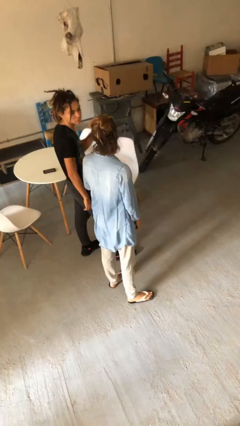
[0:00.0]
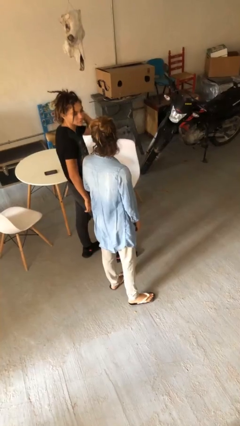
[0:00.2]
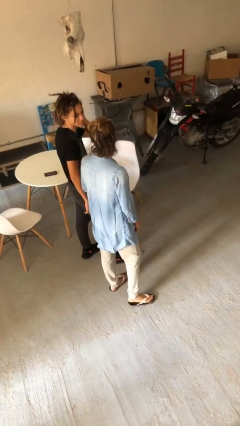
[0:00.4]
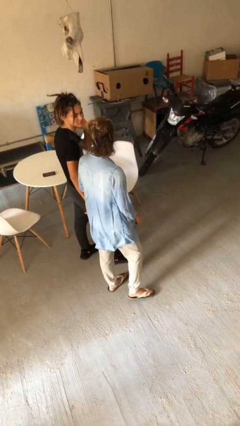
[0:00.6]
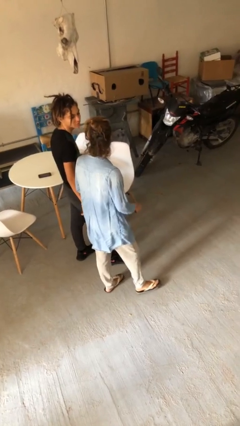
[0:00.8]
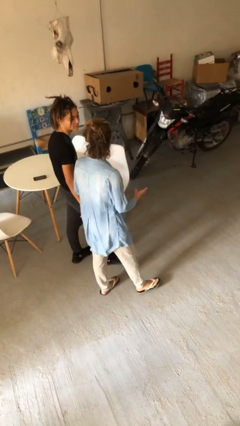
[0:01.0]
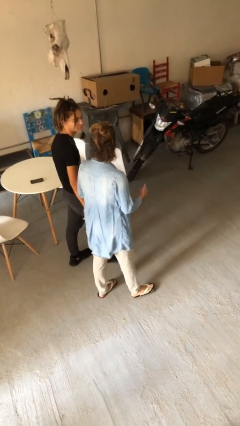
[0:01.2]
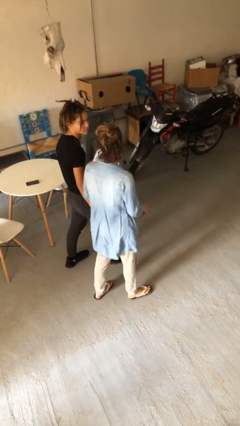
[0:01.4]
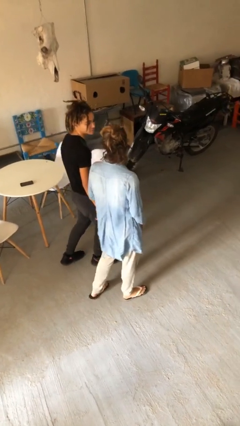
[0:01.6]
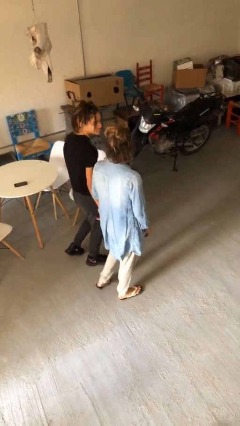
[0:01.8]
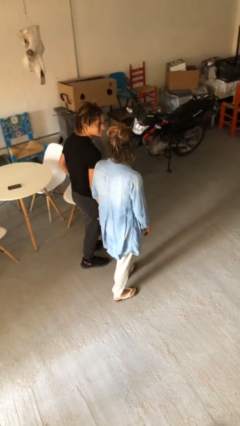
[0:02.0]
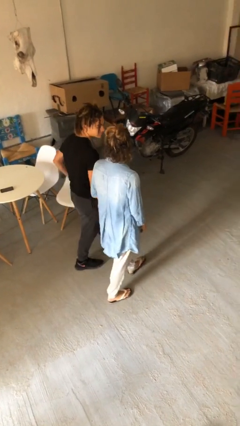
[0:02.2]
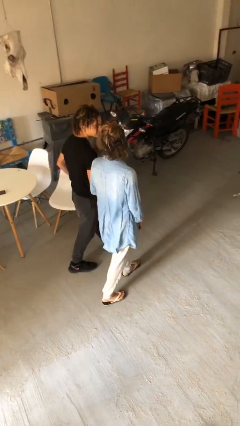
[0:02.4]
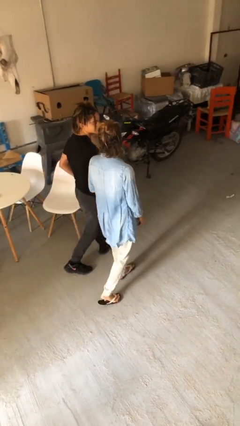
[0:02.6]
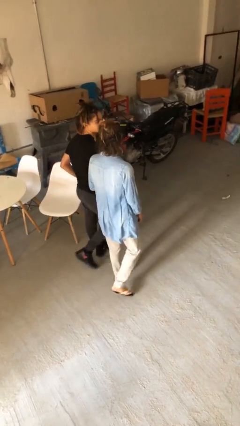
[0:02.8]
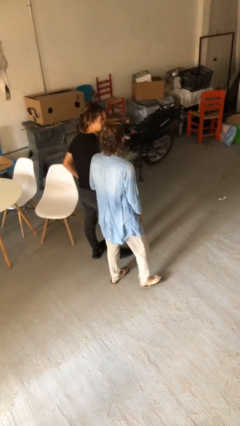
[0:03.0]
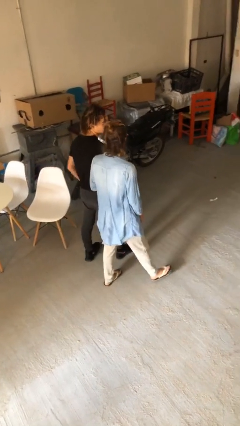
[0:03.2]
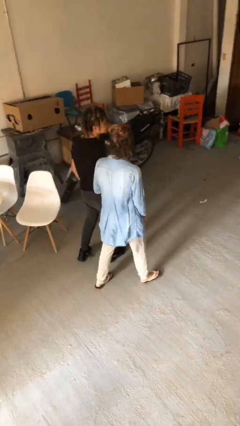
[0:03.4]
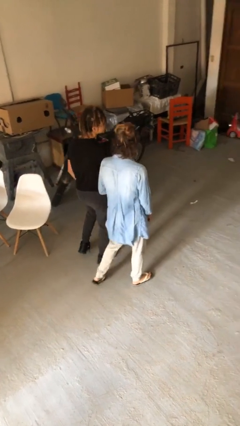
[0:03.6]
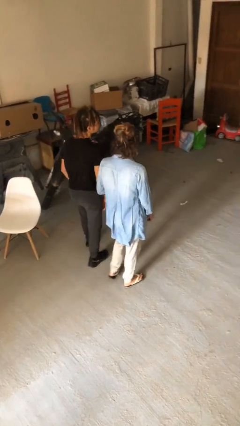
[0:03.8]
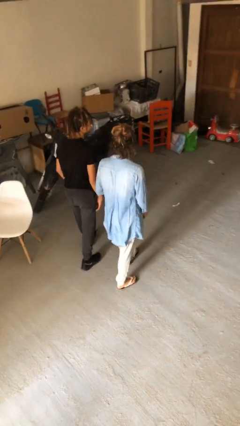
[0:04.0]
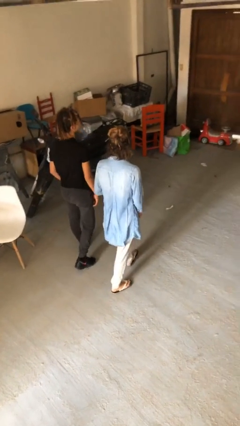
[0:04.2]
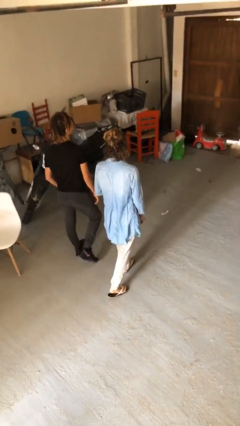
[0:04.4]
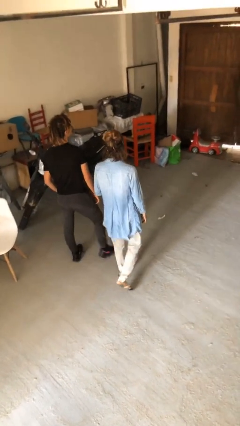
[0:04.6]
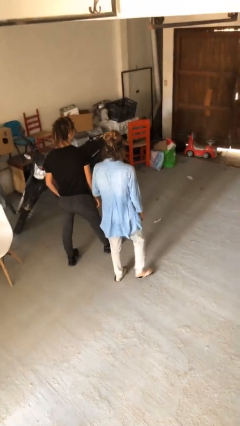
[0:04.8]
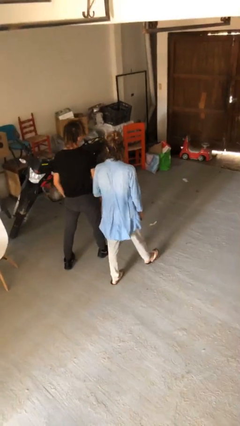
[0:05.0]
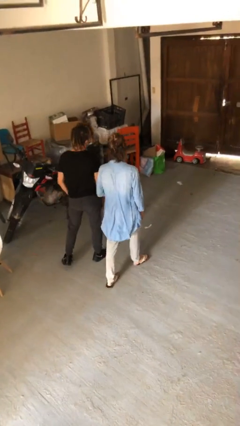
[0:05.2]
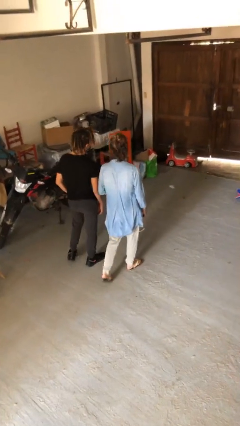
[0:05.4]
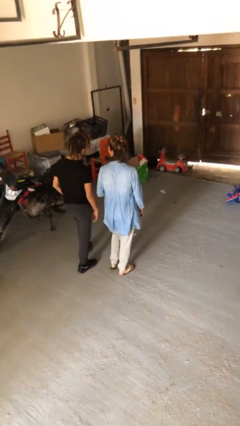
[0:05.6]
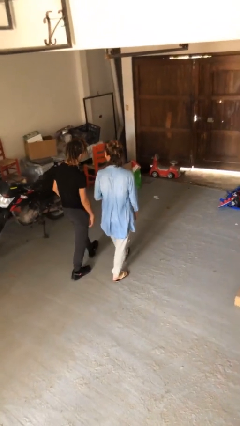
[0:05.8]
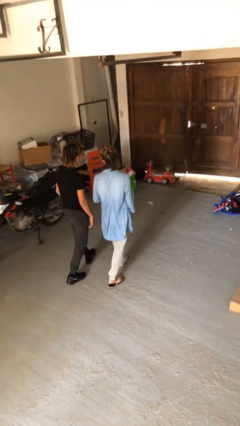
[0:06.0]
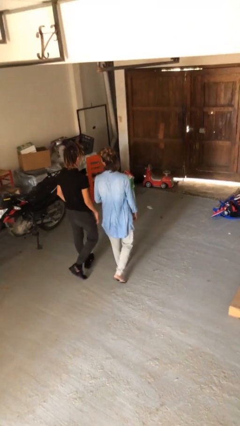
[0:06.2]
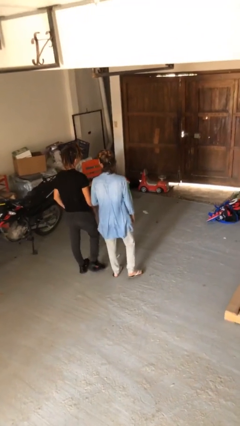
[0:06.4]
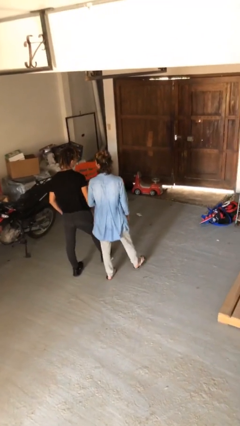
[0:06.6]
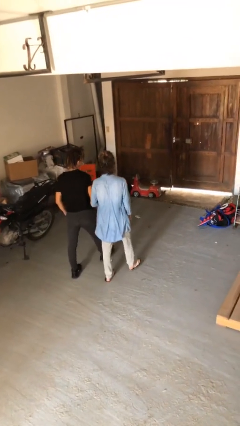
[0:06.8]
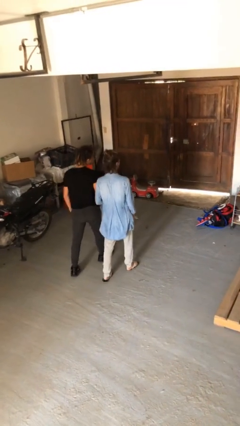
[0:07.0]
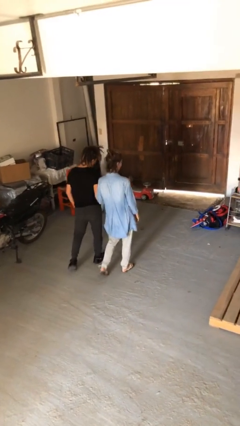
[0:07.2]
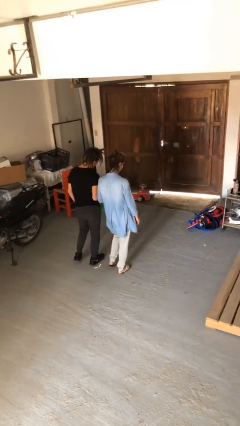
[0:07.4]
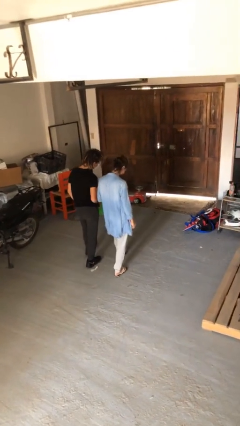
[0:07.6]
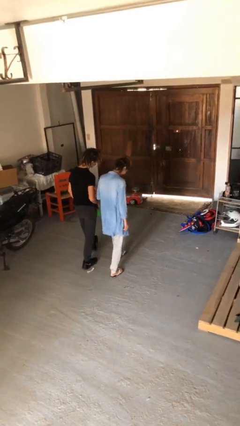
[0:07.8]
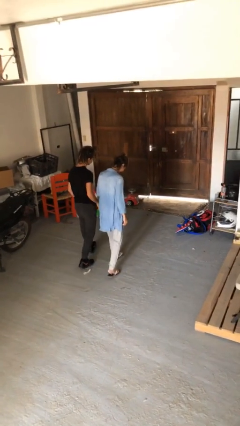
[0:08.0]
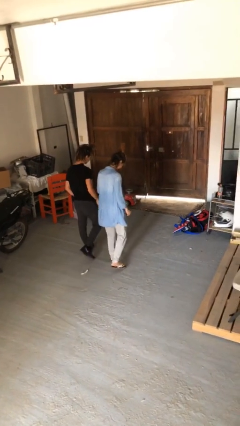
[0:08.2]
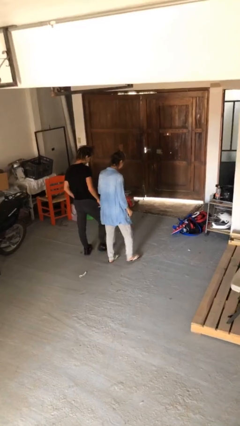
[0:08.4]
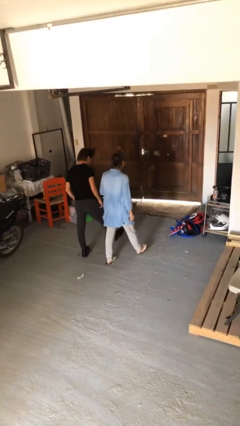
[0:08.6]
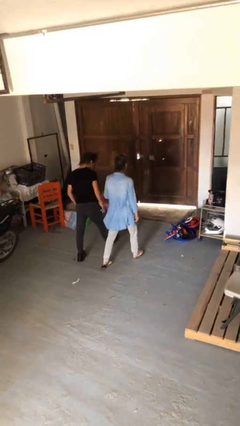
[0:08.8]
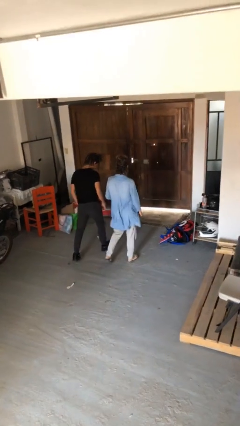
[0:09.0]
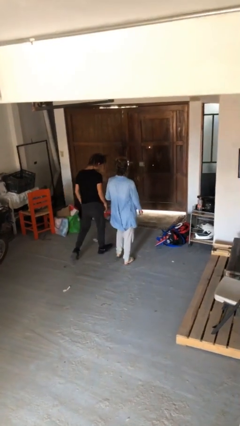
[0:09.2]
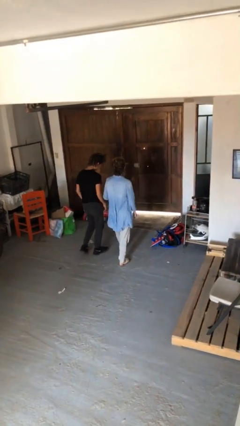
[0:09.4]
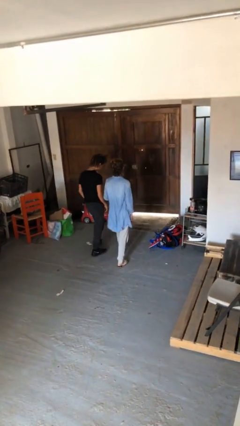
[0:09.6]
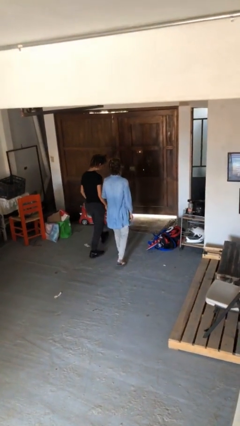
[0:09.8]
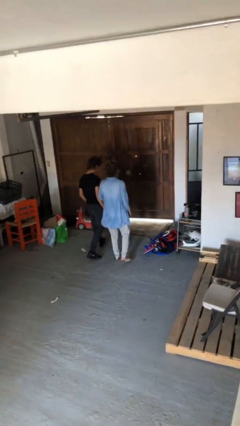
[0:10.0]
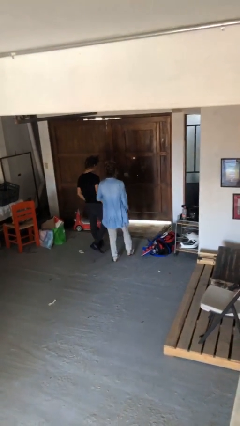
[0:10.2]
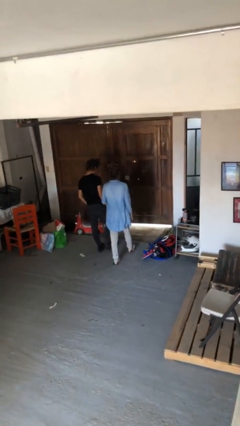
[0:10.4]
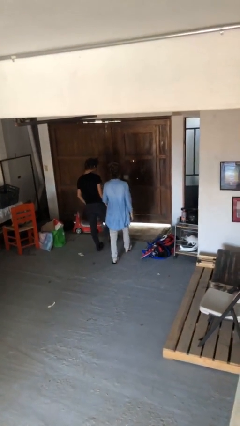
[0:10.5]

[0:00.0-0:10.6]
person talks to person

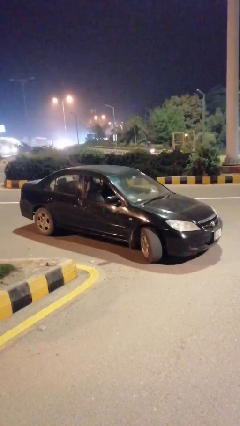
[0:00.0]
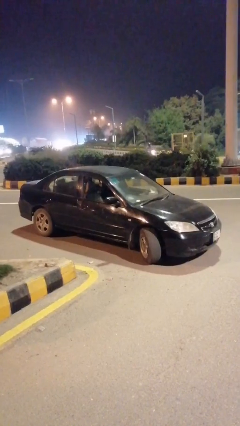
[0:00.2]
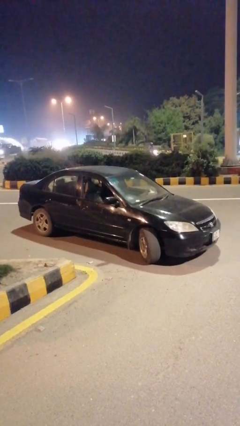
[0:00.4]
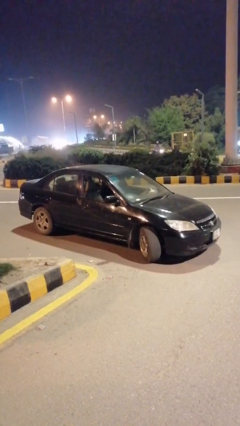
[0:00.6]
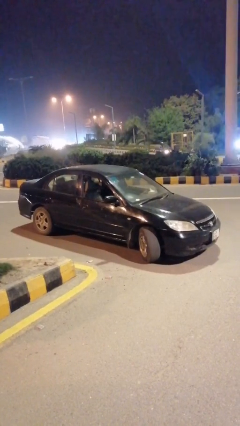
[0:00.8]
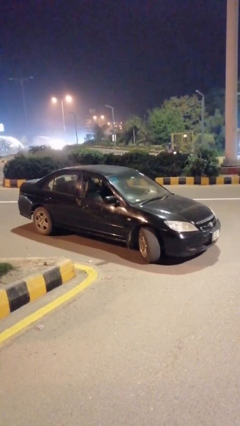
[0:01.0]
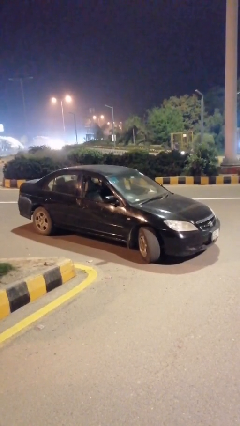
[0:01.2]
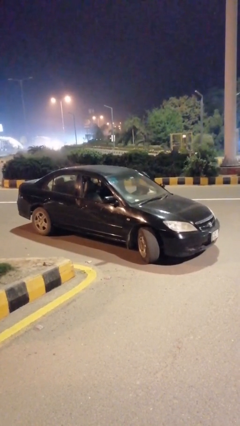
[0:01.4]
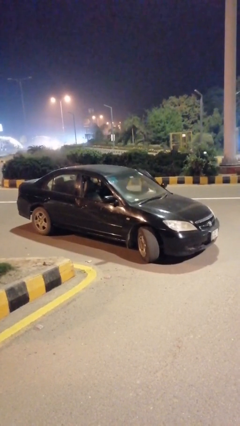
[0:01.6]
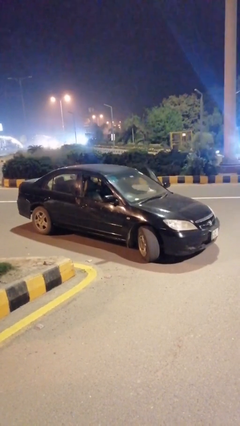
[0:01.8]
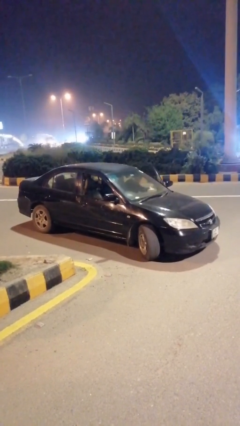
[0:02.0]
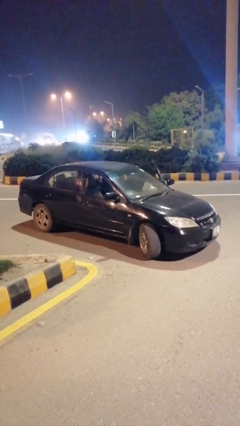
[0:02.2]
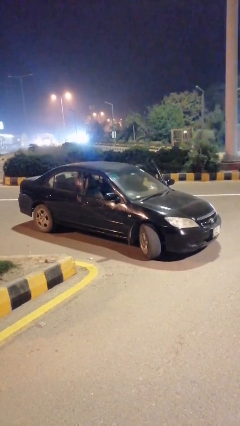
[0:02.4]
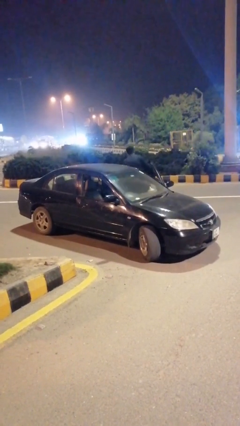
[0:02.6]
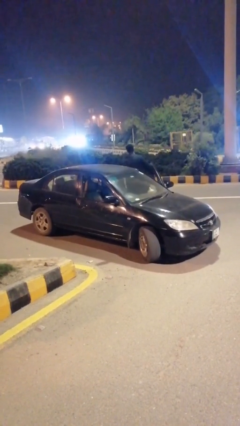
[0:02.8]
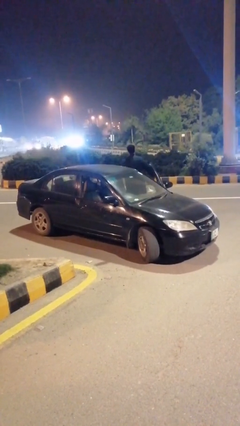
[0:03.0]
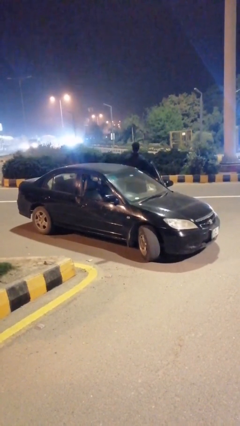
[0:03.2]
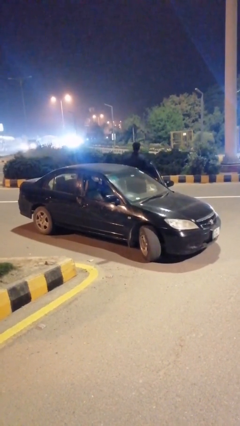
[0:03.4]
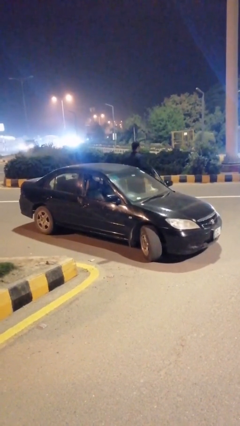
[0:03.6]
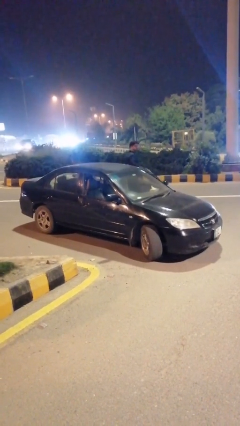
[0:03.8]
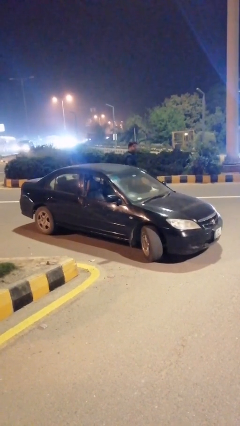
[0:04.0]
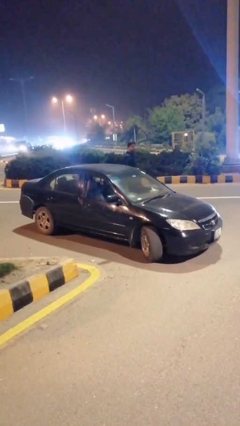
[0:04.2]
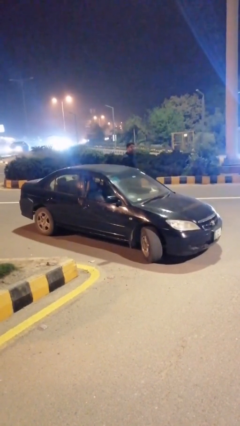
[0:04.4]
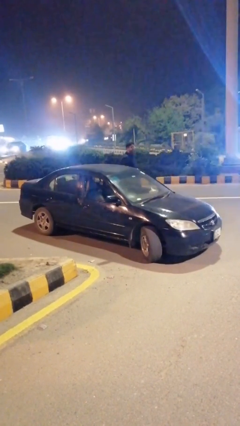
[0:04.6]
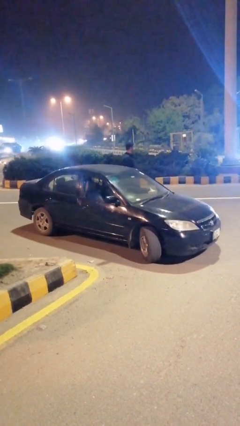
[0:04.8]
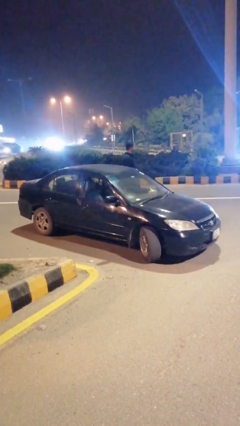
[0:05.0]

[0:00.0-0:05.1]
car drops off person

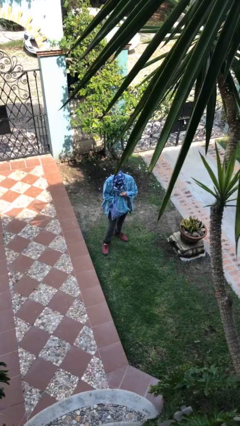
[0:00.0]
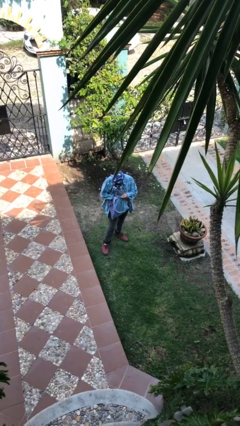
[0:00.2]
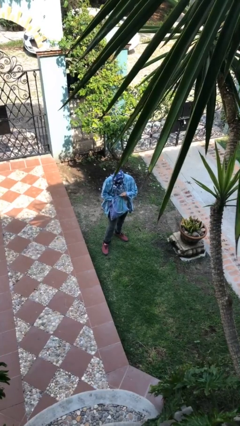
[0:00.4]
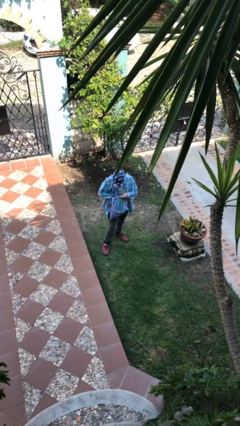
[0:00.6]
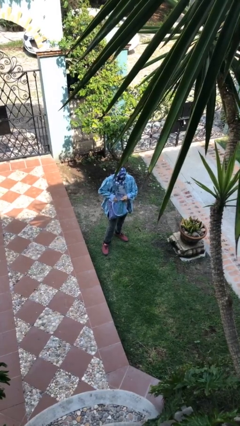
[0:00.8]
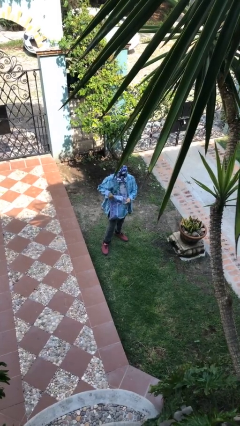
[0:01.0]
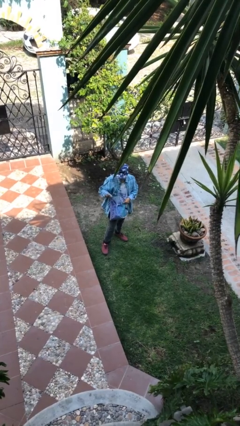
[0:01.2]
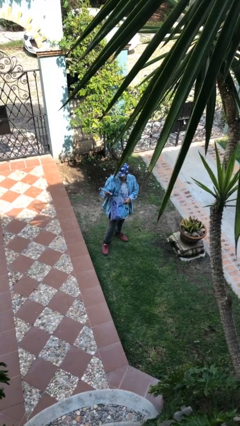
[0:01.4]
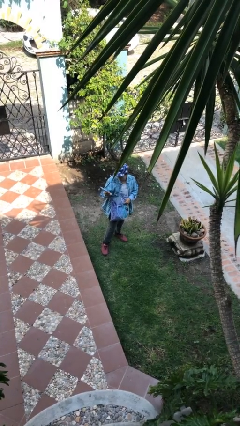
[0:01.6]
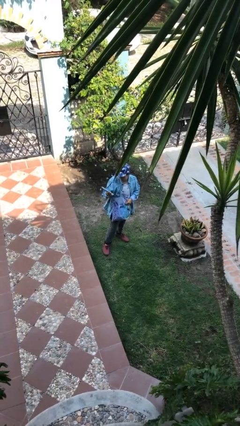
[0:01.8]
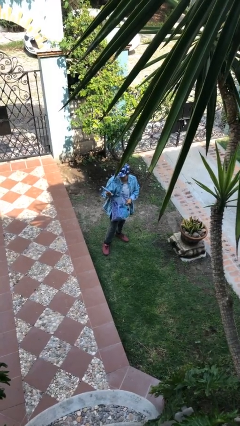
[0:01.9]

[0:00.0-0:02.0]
person takes object from purse
